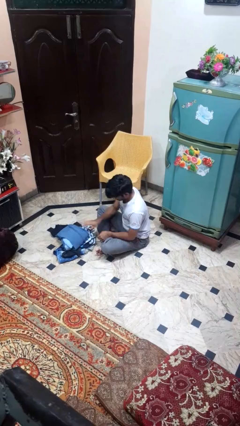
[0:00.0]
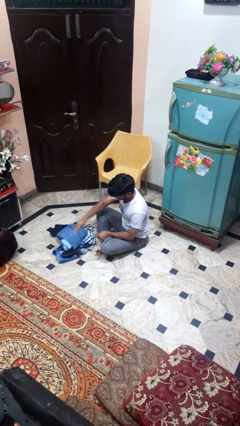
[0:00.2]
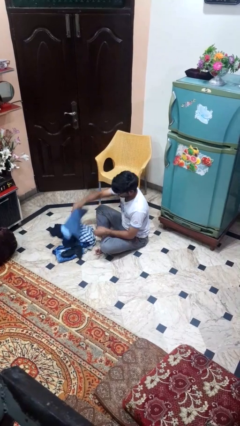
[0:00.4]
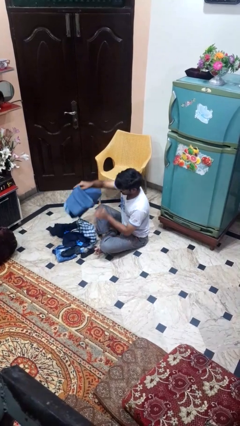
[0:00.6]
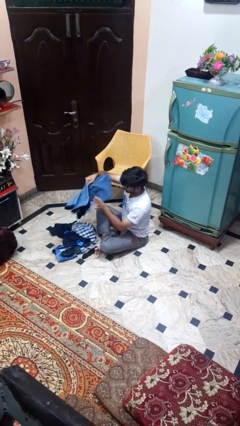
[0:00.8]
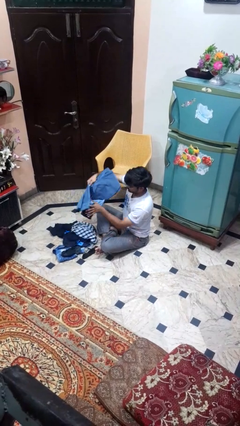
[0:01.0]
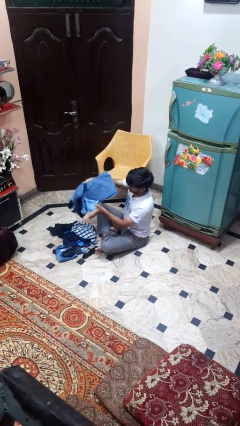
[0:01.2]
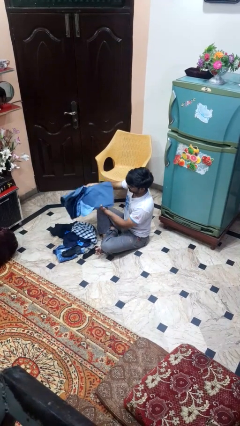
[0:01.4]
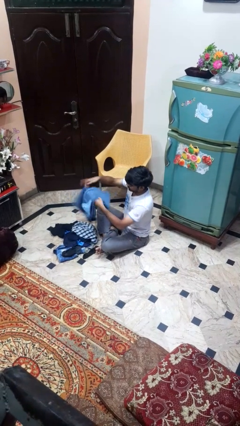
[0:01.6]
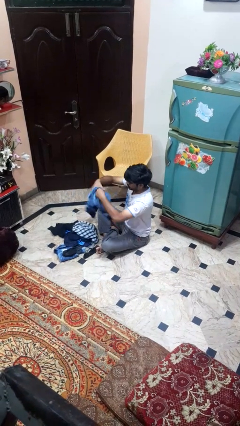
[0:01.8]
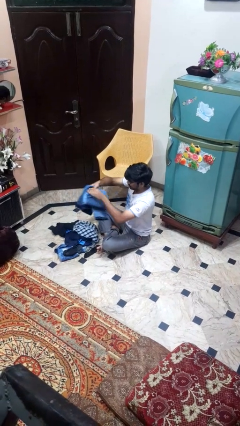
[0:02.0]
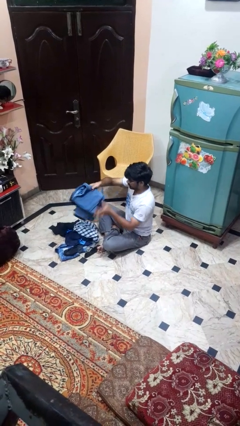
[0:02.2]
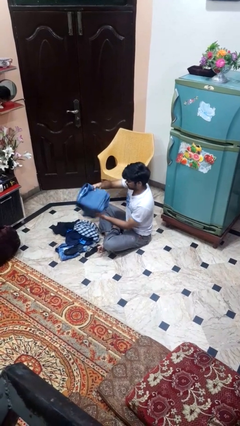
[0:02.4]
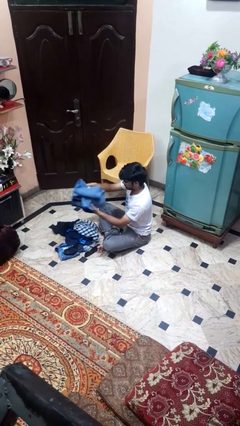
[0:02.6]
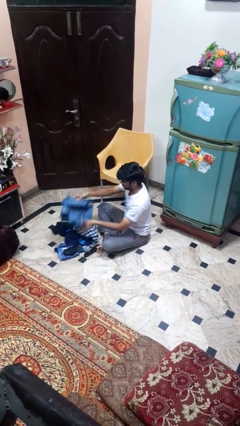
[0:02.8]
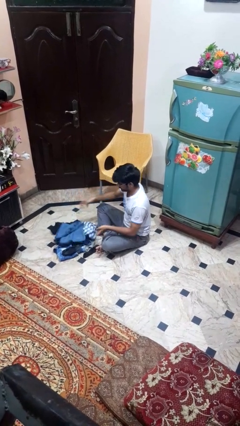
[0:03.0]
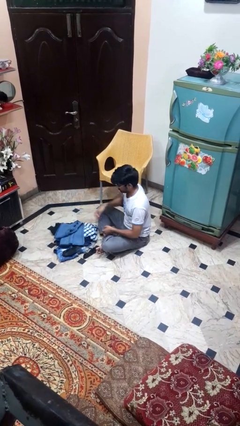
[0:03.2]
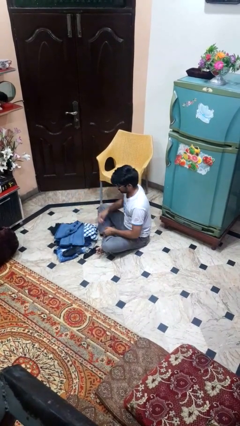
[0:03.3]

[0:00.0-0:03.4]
person folds pants

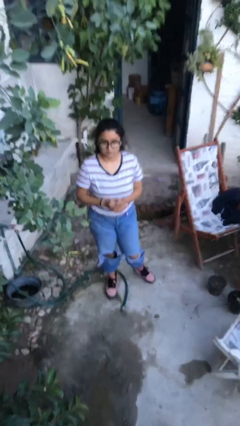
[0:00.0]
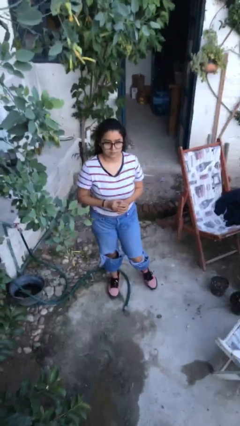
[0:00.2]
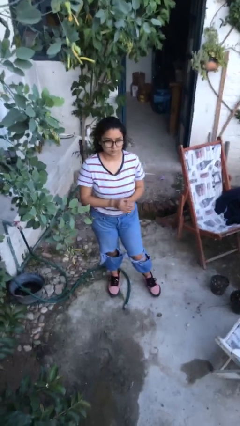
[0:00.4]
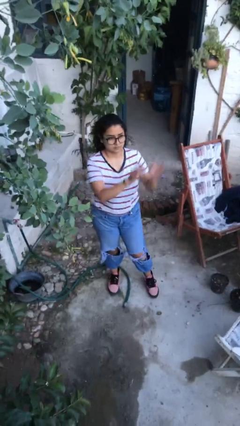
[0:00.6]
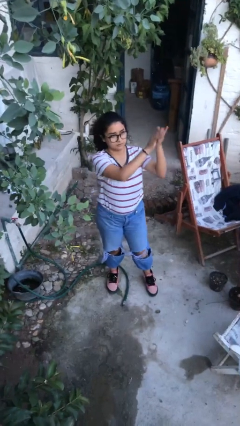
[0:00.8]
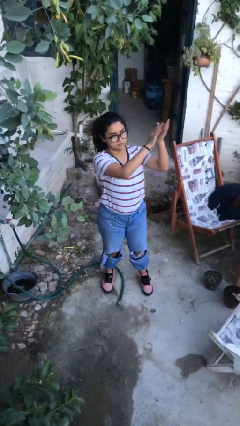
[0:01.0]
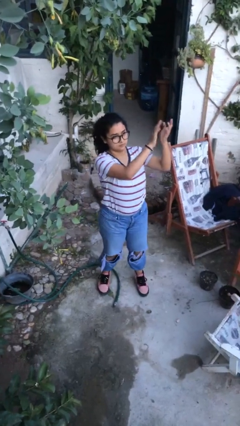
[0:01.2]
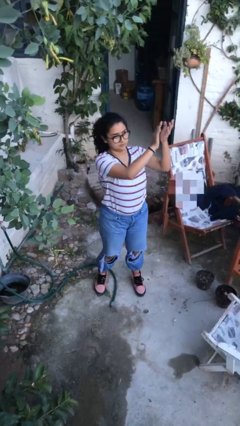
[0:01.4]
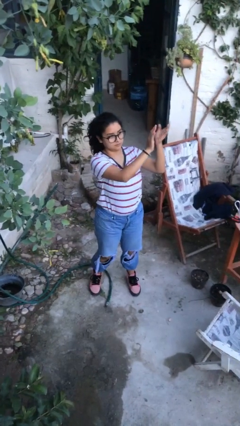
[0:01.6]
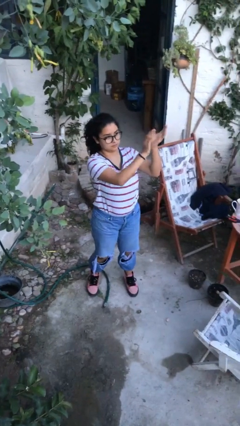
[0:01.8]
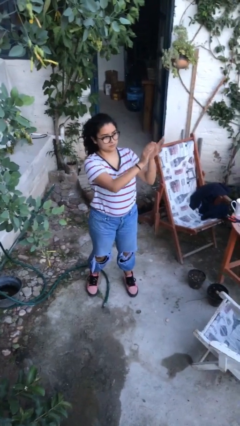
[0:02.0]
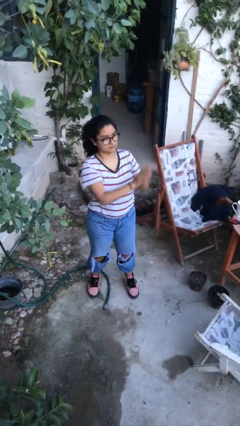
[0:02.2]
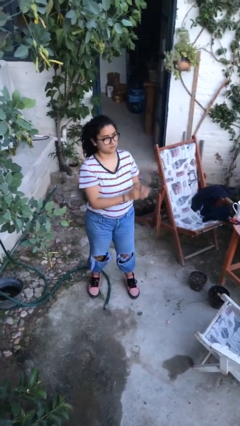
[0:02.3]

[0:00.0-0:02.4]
person claps hands

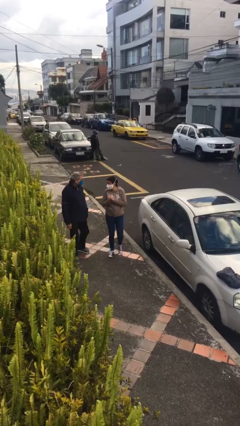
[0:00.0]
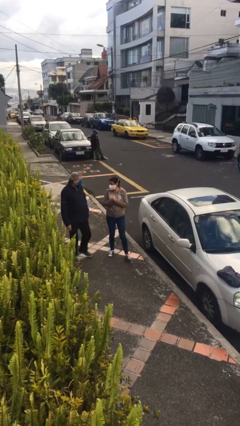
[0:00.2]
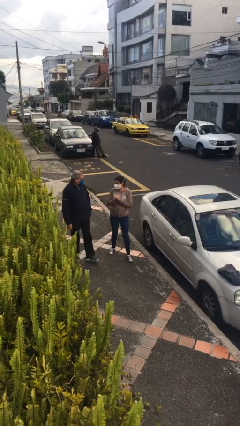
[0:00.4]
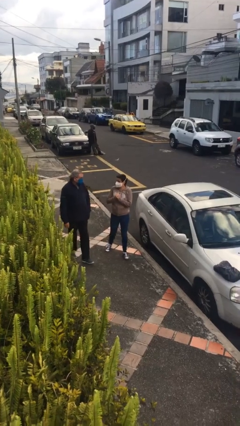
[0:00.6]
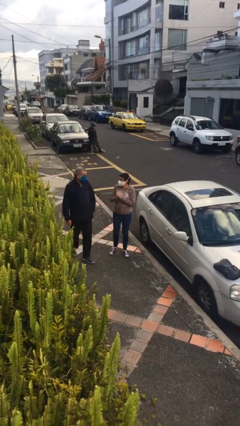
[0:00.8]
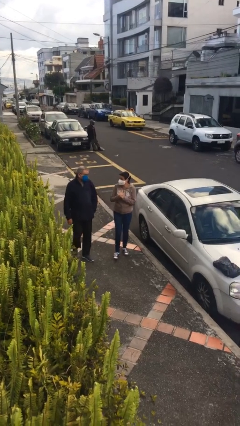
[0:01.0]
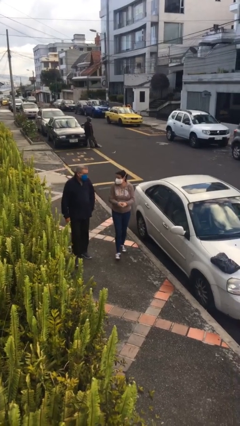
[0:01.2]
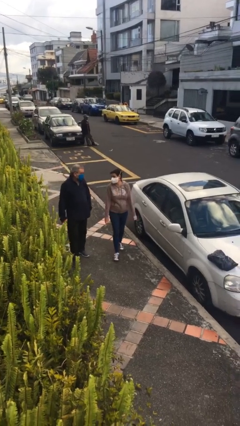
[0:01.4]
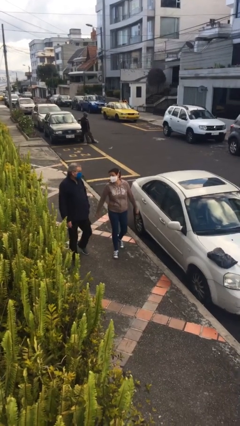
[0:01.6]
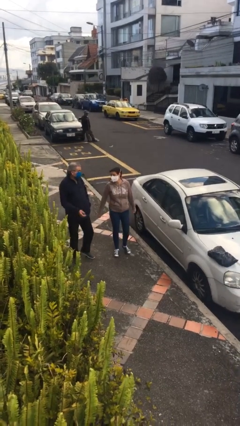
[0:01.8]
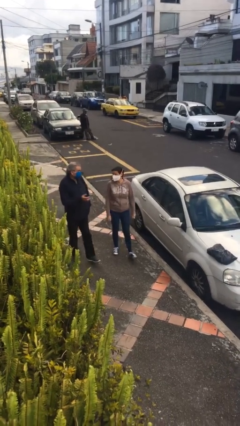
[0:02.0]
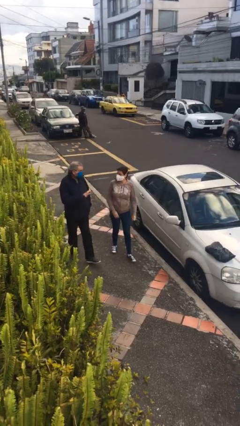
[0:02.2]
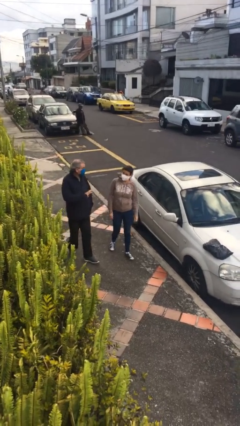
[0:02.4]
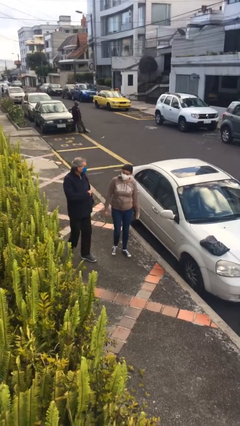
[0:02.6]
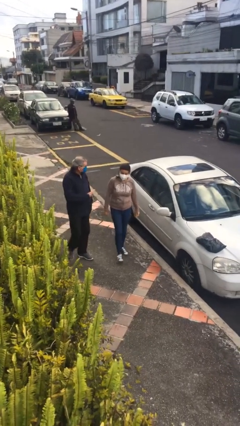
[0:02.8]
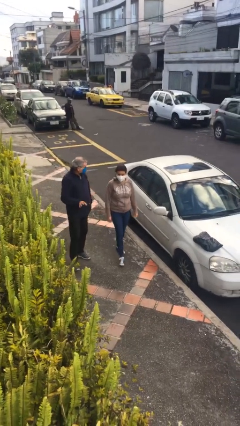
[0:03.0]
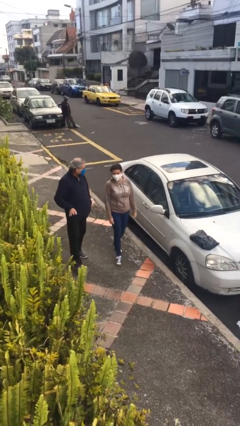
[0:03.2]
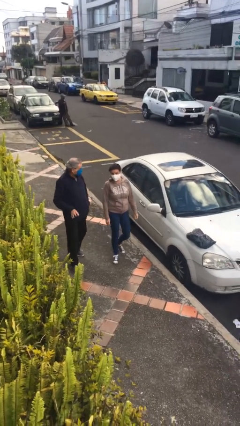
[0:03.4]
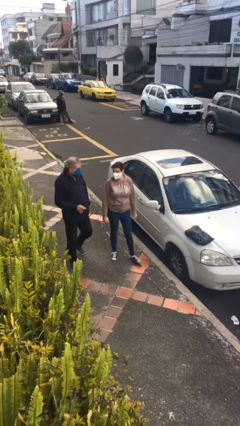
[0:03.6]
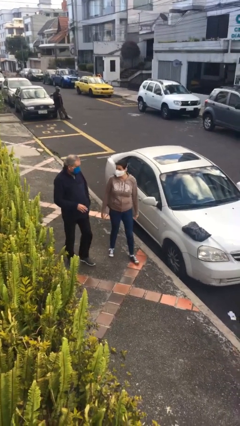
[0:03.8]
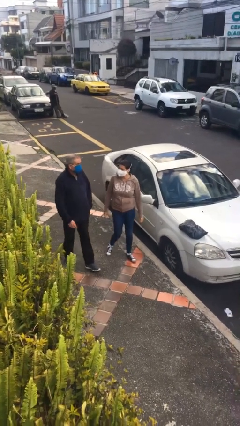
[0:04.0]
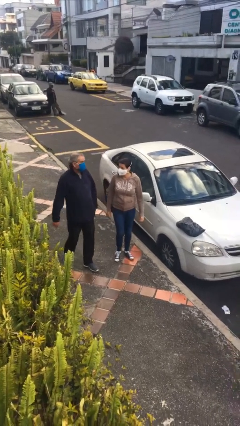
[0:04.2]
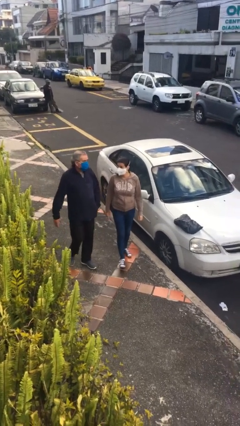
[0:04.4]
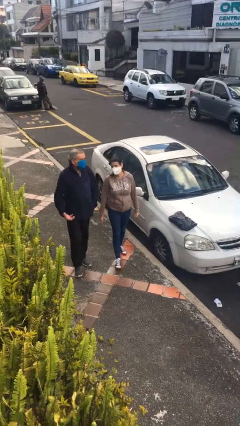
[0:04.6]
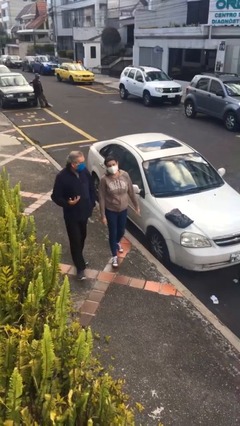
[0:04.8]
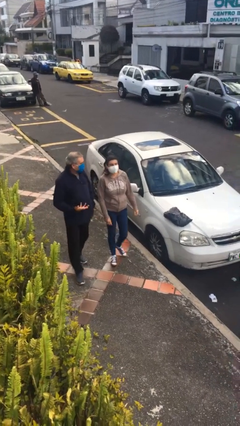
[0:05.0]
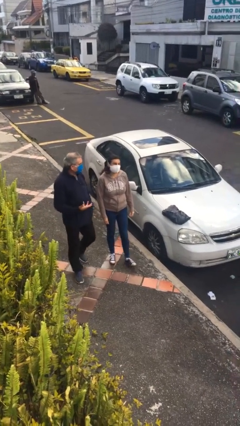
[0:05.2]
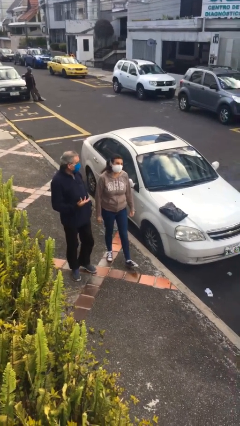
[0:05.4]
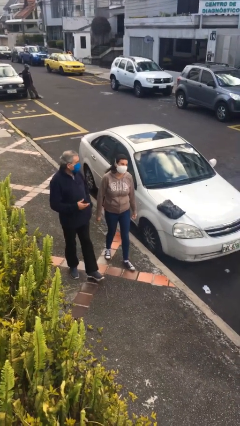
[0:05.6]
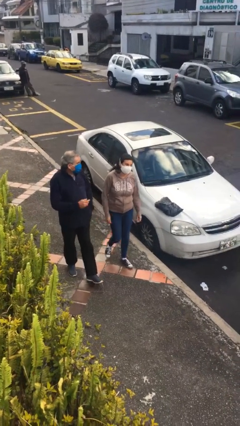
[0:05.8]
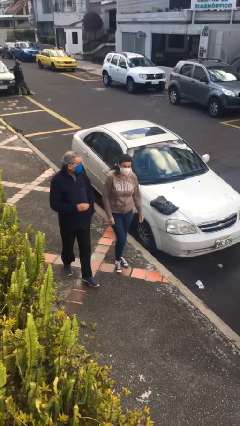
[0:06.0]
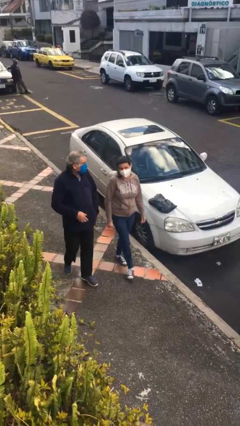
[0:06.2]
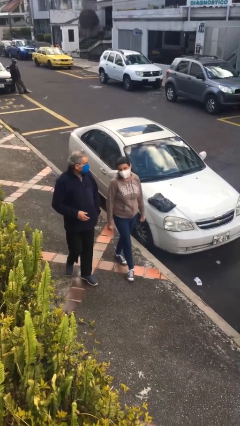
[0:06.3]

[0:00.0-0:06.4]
person talks to person

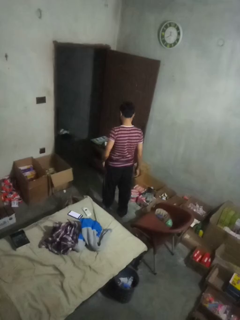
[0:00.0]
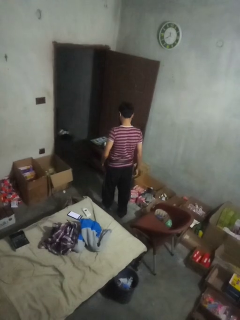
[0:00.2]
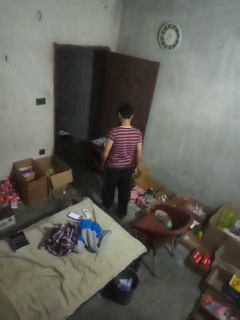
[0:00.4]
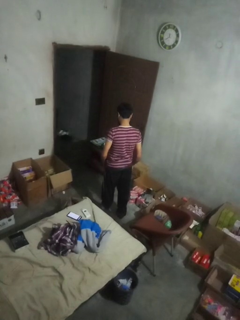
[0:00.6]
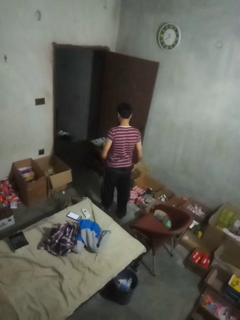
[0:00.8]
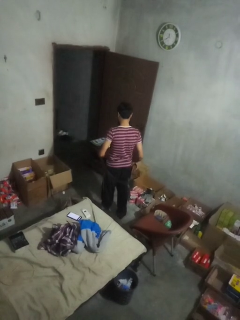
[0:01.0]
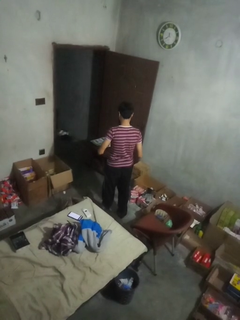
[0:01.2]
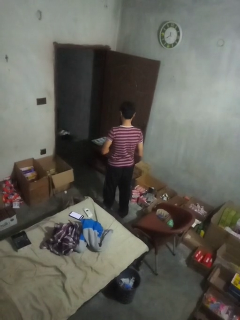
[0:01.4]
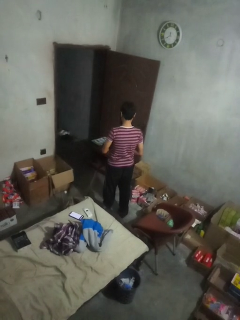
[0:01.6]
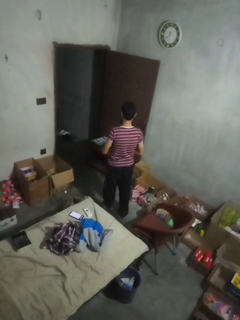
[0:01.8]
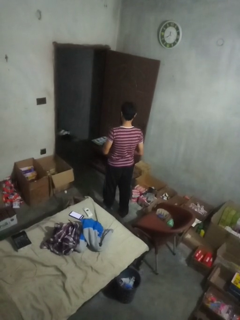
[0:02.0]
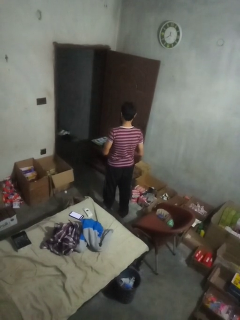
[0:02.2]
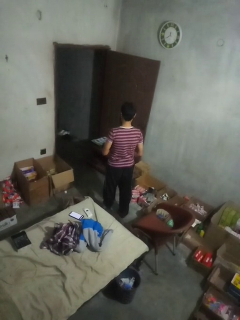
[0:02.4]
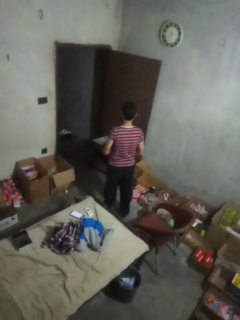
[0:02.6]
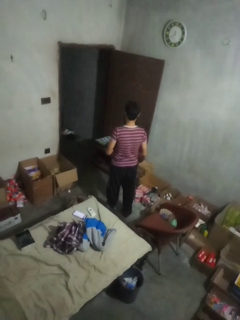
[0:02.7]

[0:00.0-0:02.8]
person takes off belt

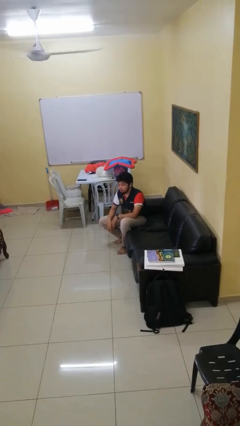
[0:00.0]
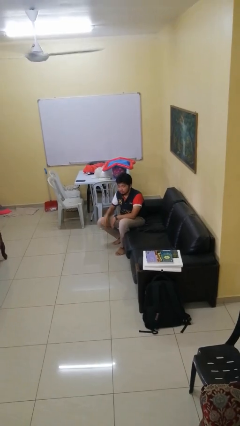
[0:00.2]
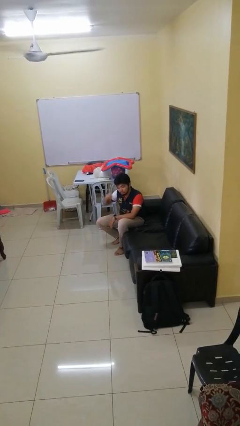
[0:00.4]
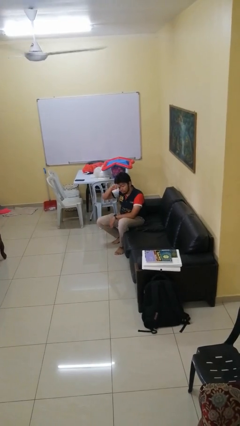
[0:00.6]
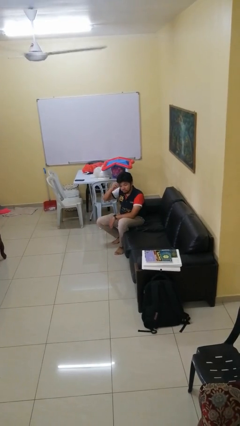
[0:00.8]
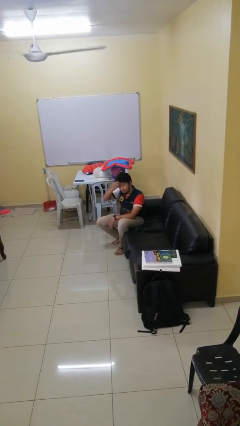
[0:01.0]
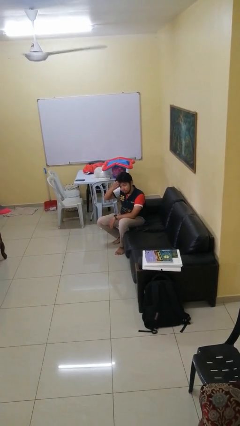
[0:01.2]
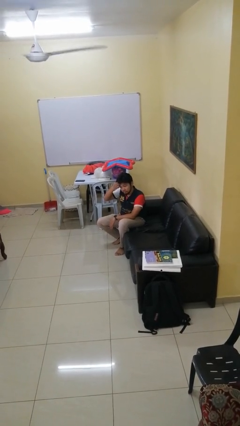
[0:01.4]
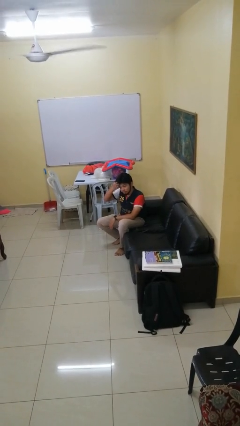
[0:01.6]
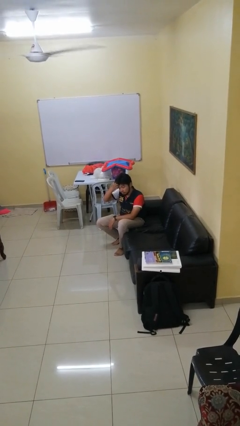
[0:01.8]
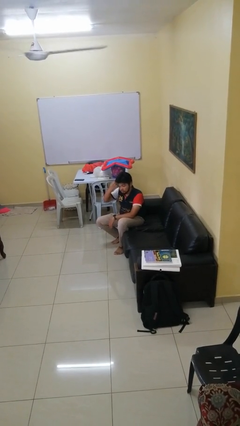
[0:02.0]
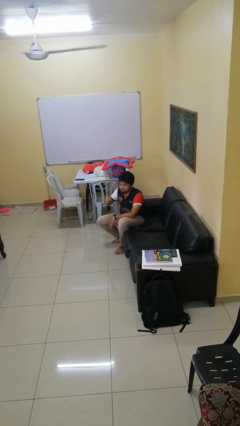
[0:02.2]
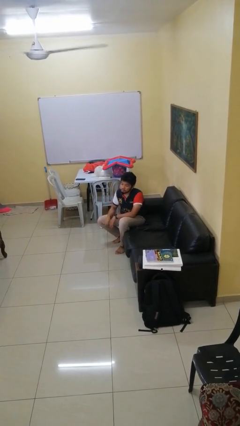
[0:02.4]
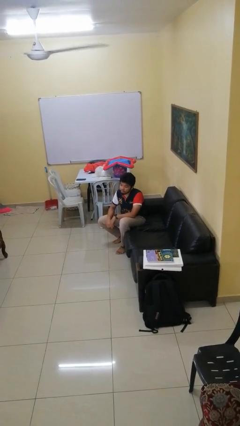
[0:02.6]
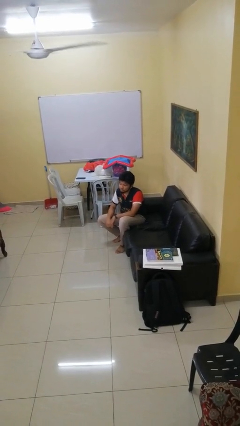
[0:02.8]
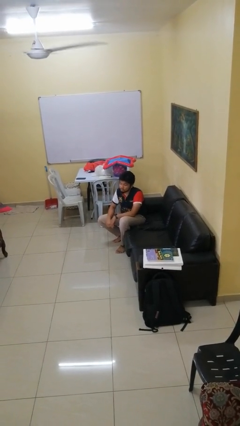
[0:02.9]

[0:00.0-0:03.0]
person scratches face
